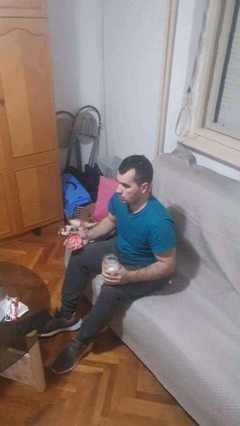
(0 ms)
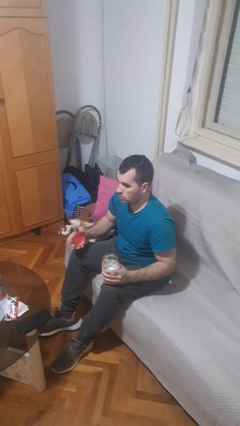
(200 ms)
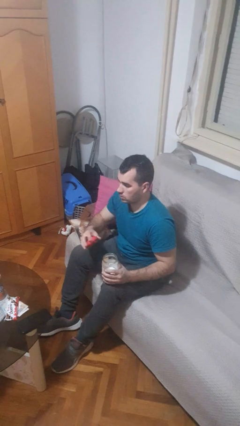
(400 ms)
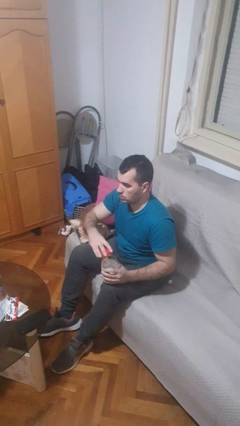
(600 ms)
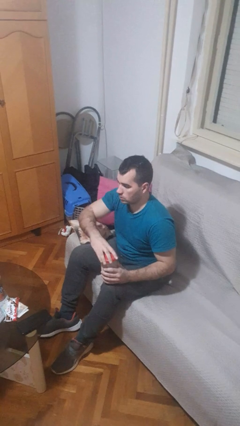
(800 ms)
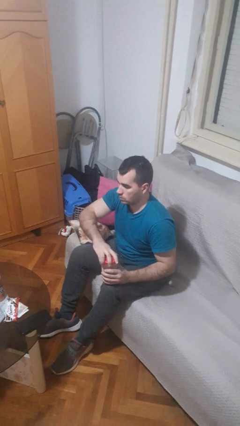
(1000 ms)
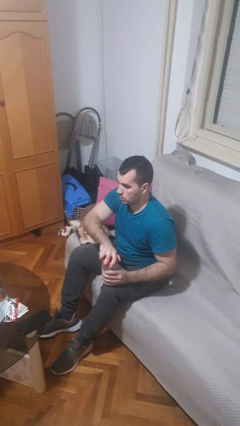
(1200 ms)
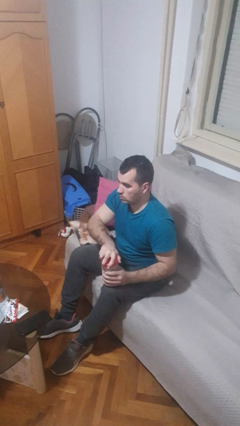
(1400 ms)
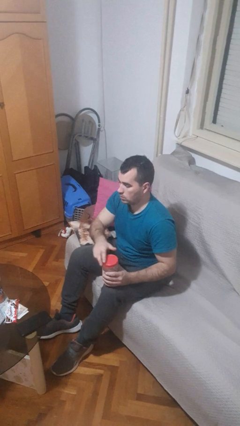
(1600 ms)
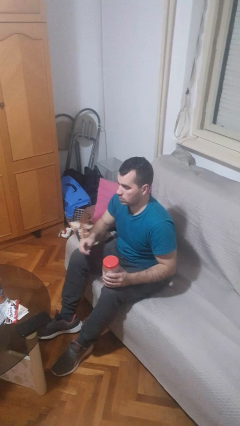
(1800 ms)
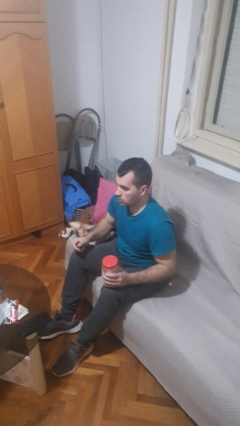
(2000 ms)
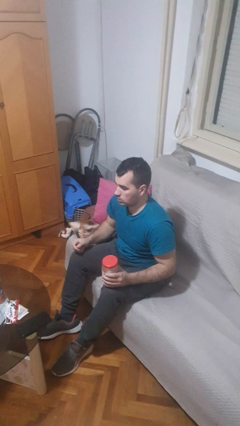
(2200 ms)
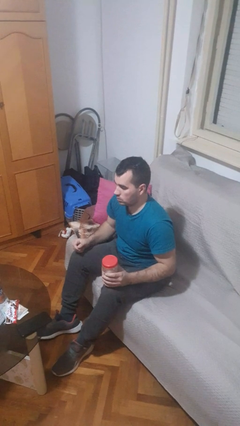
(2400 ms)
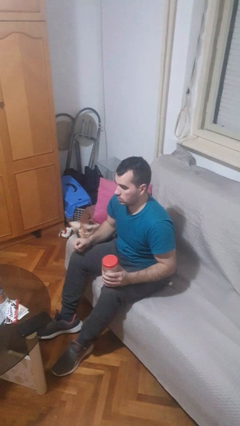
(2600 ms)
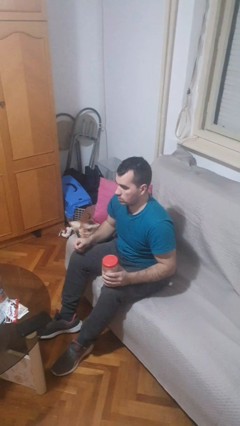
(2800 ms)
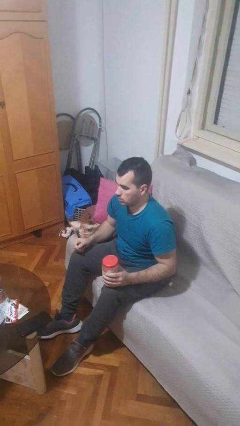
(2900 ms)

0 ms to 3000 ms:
person closes jar

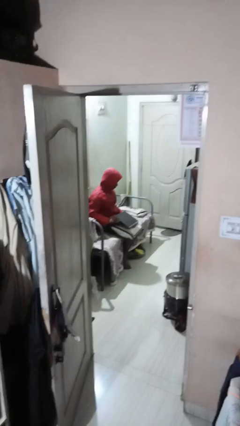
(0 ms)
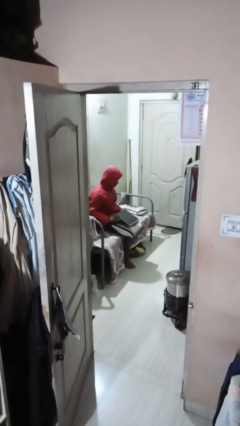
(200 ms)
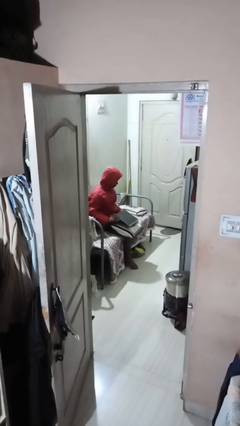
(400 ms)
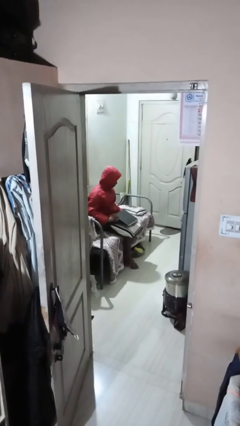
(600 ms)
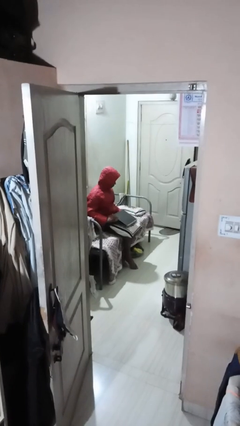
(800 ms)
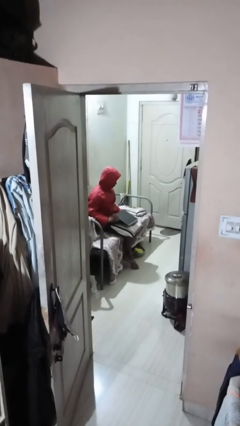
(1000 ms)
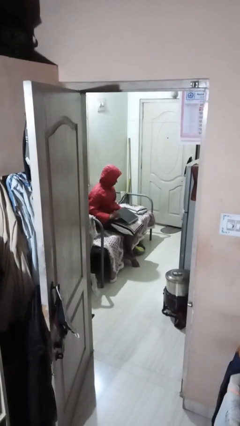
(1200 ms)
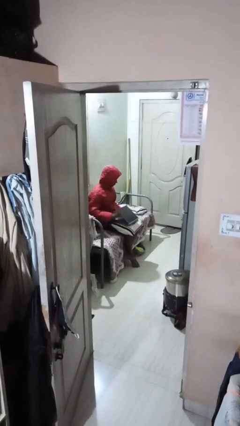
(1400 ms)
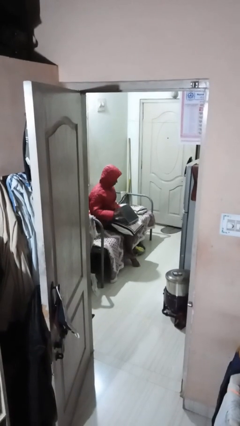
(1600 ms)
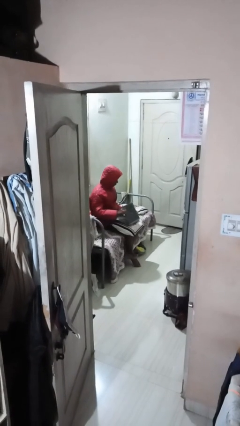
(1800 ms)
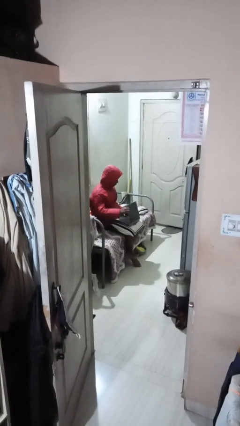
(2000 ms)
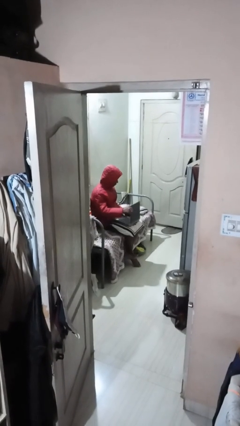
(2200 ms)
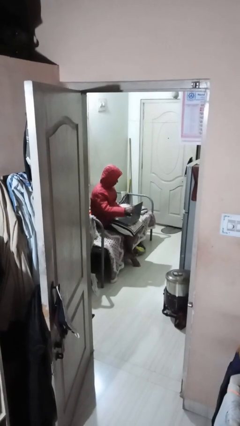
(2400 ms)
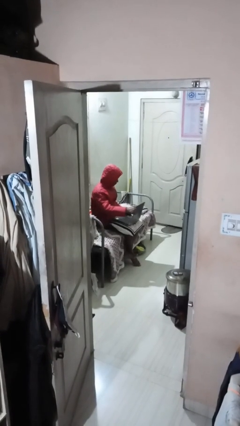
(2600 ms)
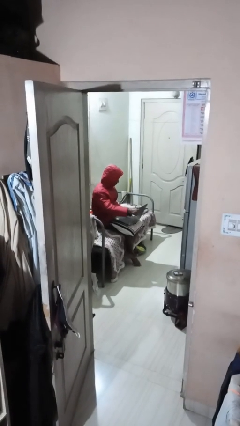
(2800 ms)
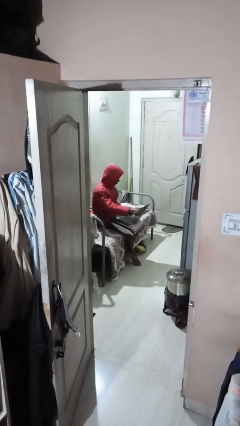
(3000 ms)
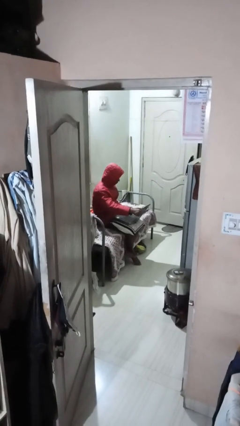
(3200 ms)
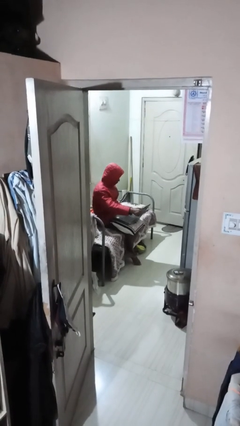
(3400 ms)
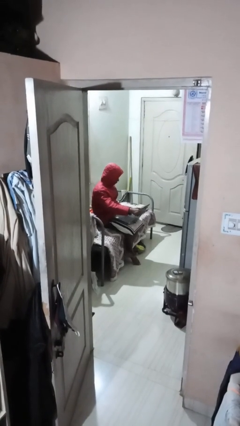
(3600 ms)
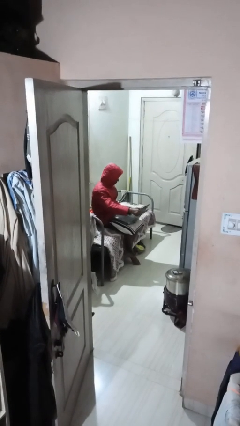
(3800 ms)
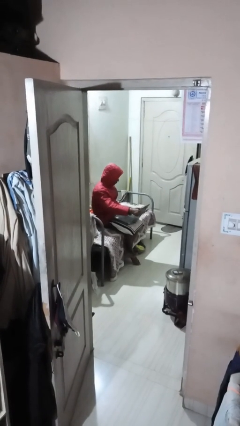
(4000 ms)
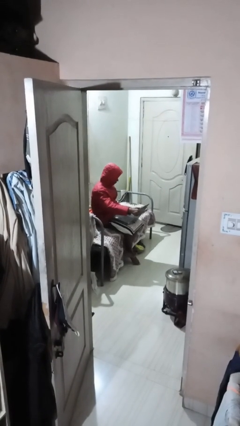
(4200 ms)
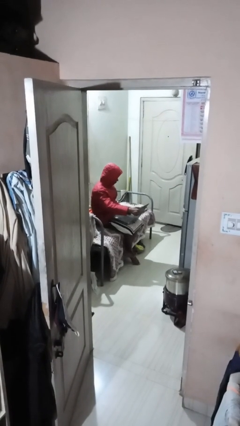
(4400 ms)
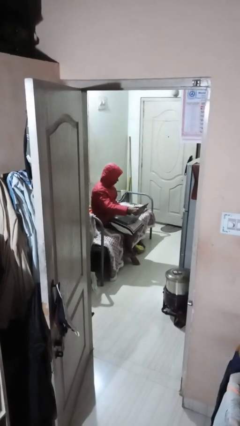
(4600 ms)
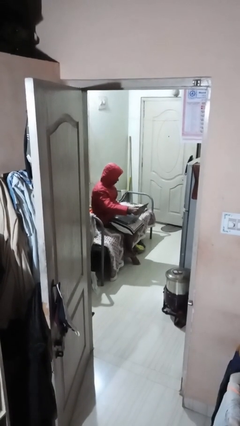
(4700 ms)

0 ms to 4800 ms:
person interacts with laptop

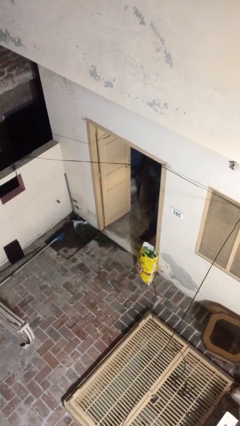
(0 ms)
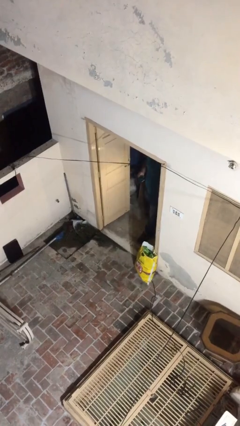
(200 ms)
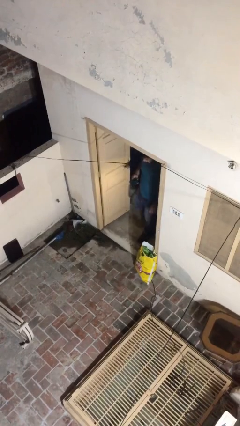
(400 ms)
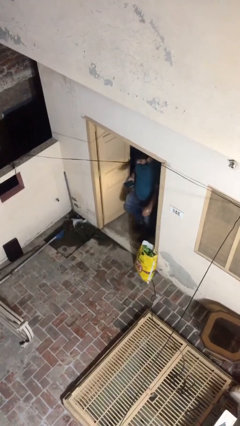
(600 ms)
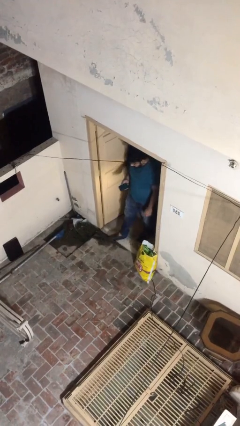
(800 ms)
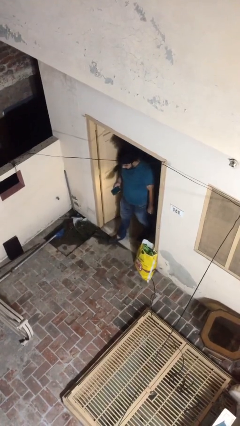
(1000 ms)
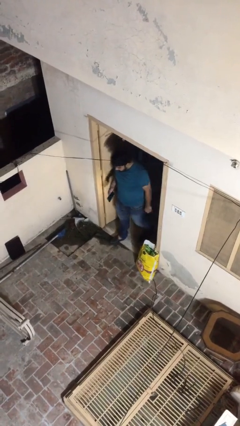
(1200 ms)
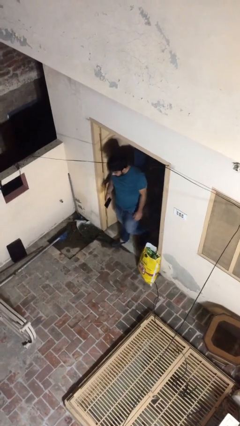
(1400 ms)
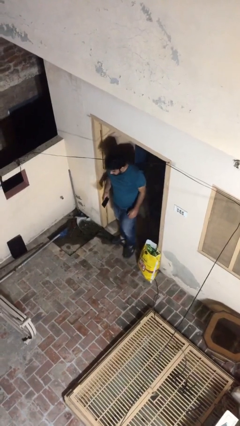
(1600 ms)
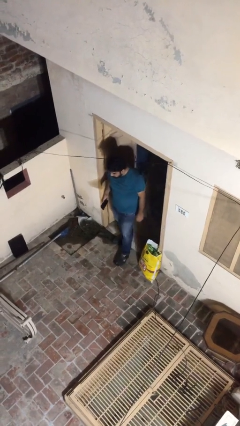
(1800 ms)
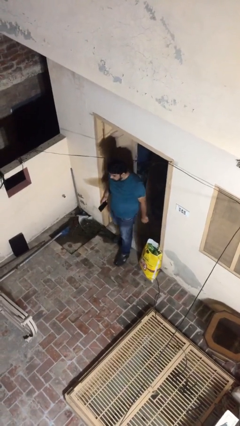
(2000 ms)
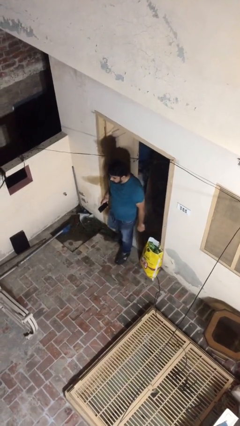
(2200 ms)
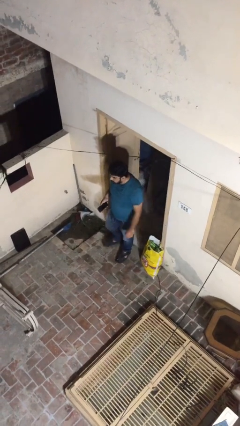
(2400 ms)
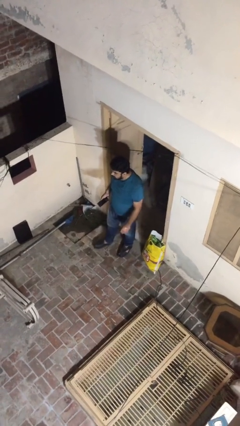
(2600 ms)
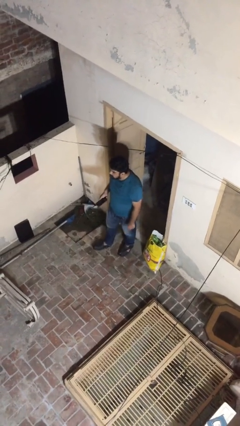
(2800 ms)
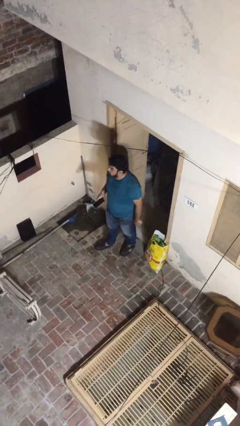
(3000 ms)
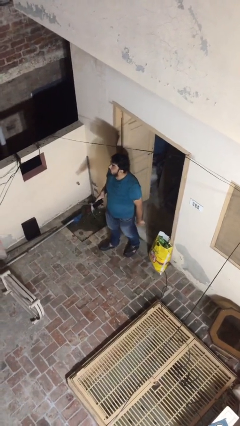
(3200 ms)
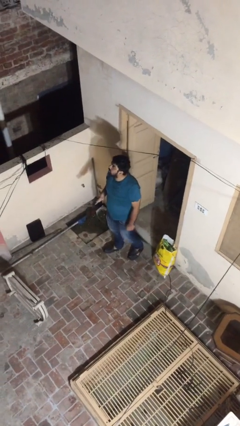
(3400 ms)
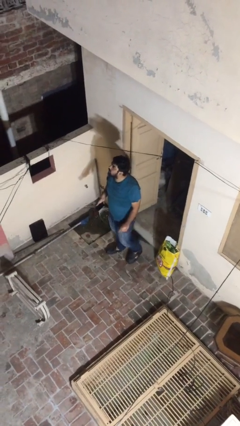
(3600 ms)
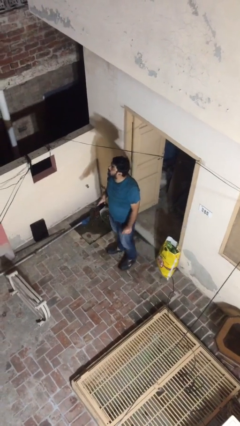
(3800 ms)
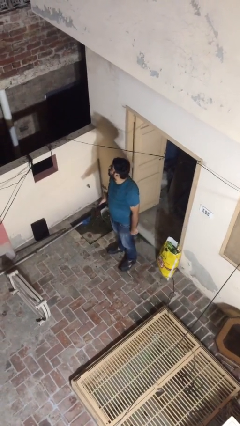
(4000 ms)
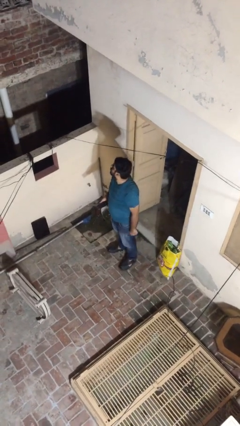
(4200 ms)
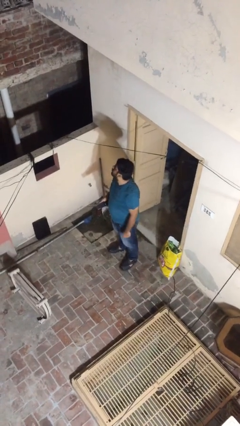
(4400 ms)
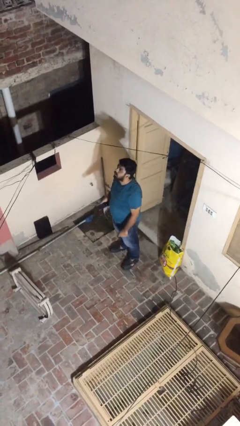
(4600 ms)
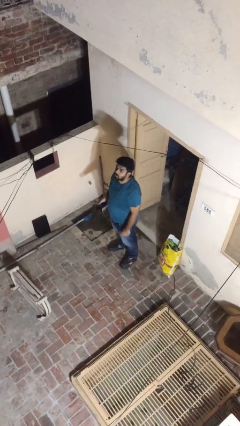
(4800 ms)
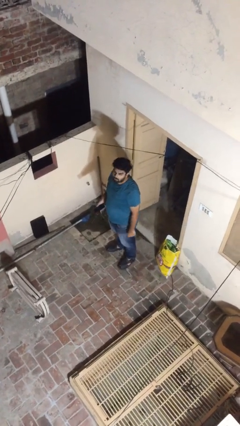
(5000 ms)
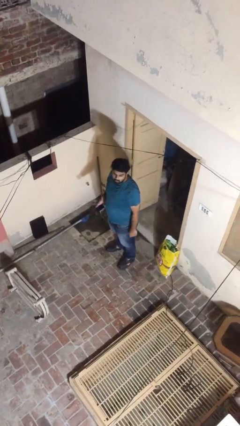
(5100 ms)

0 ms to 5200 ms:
person enters scene through structure

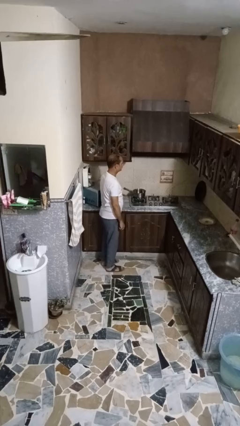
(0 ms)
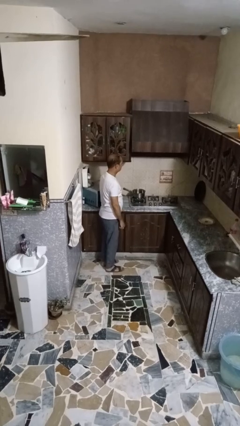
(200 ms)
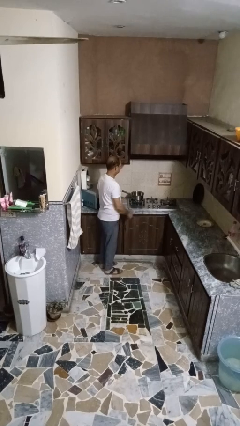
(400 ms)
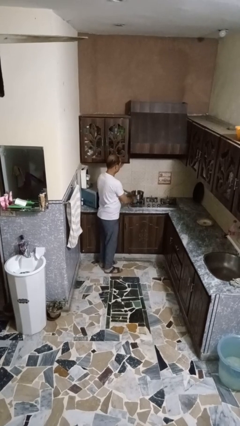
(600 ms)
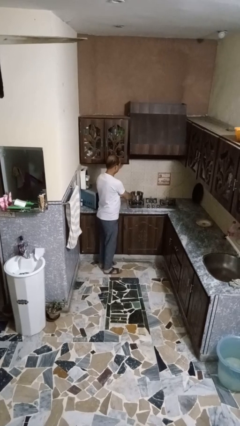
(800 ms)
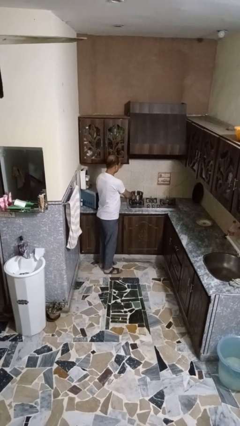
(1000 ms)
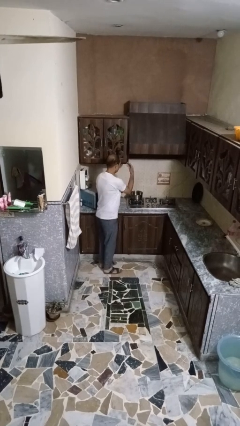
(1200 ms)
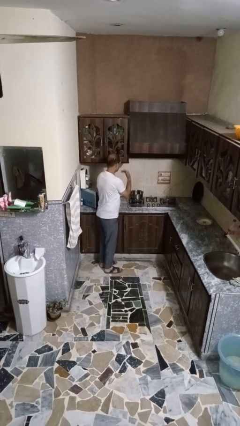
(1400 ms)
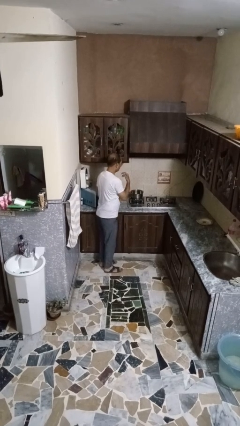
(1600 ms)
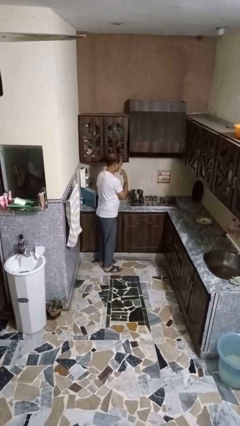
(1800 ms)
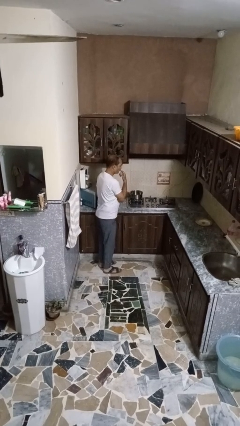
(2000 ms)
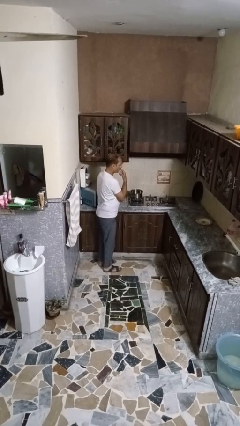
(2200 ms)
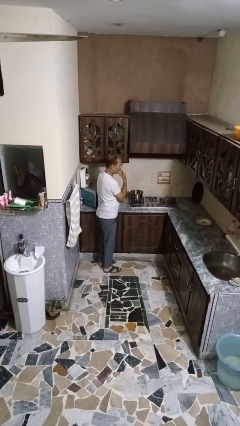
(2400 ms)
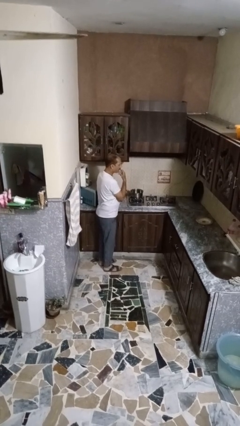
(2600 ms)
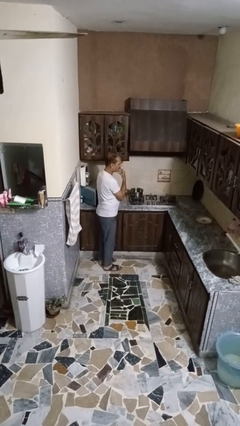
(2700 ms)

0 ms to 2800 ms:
person burns hand

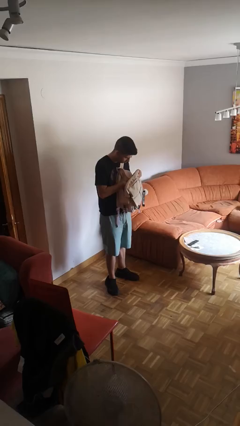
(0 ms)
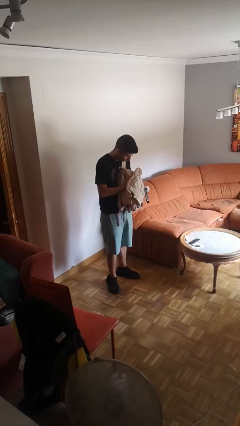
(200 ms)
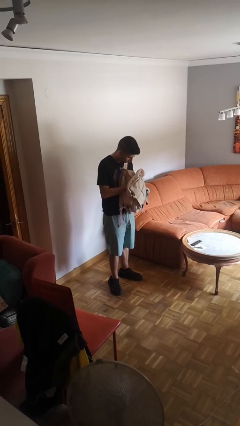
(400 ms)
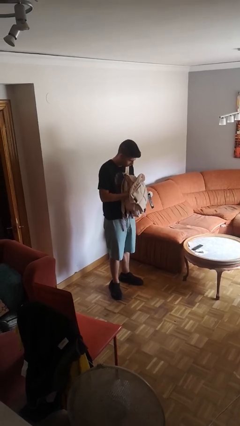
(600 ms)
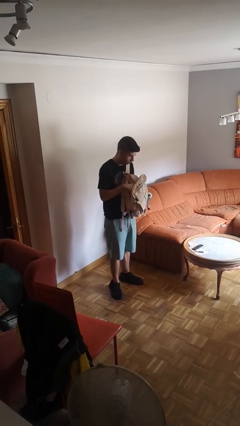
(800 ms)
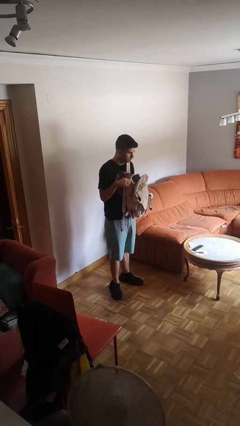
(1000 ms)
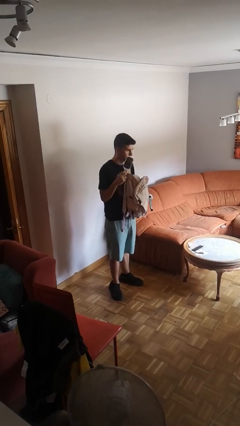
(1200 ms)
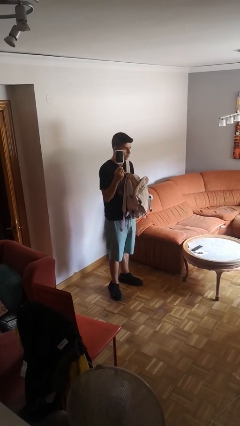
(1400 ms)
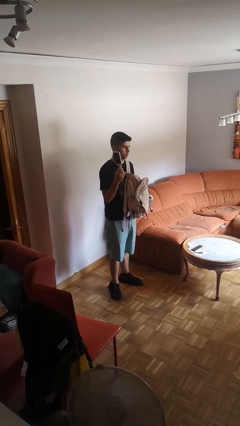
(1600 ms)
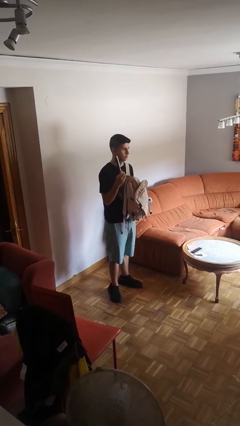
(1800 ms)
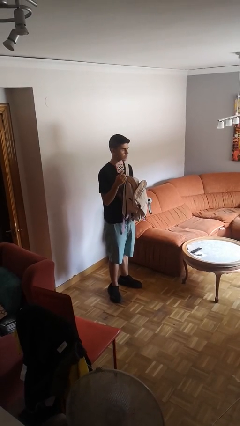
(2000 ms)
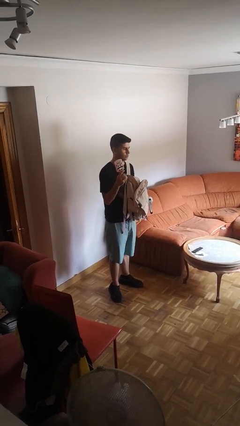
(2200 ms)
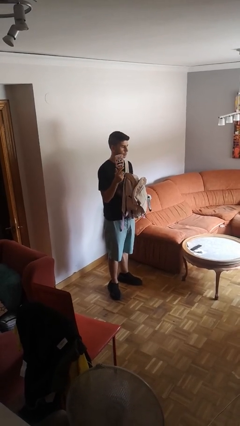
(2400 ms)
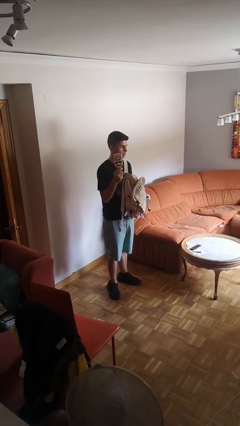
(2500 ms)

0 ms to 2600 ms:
person takes object from backpack
